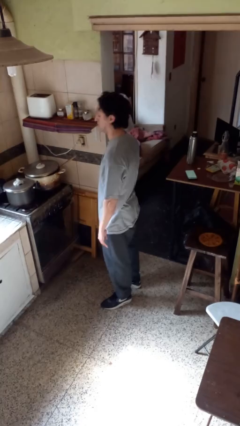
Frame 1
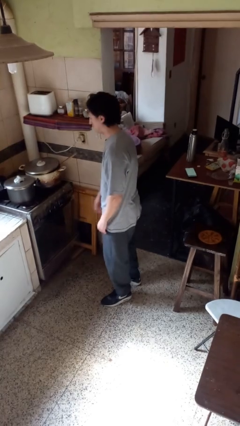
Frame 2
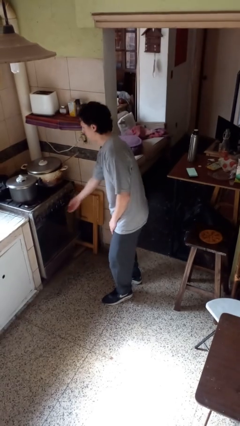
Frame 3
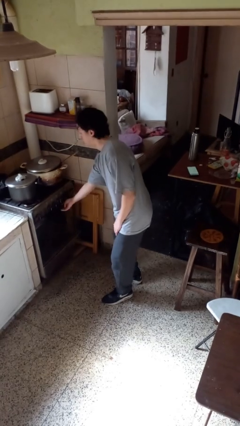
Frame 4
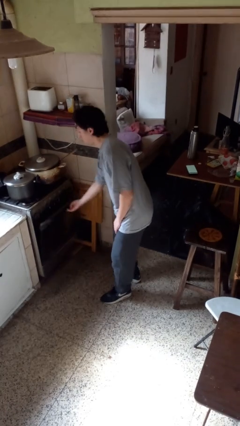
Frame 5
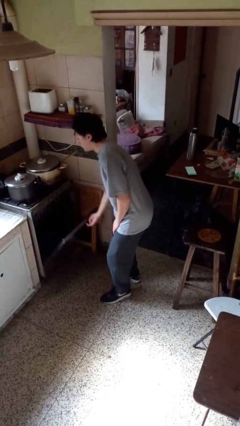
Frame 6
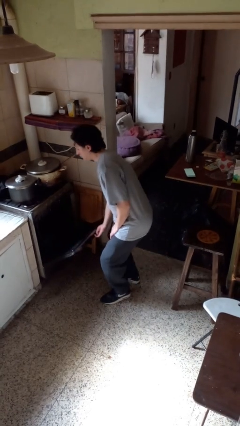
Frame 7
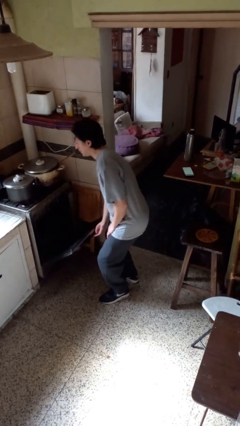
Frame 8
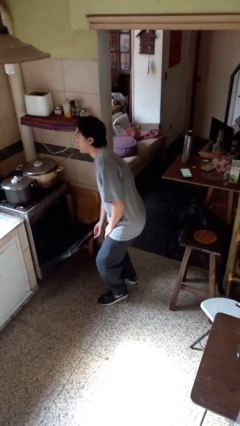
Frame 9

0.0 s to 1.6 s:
person opens oven door

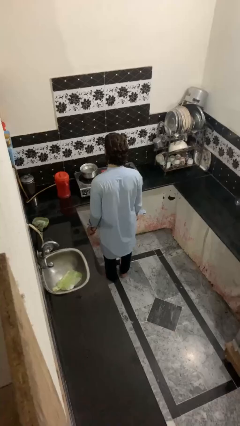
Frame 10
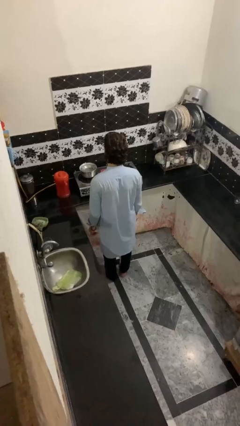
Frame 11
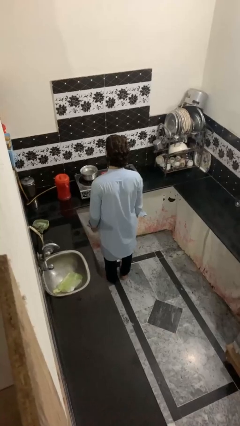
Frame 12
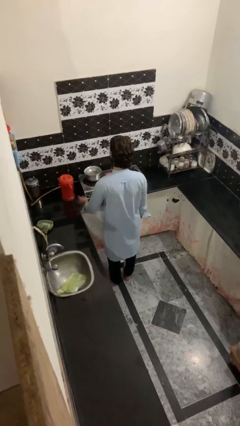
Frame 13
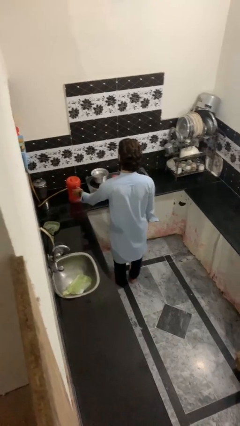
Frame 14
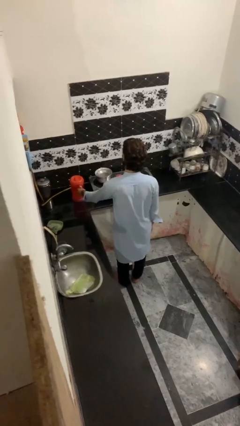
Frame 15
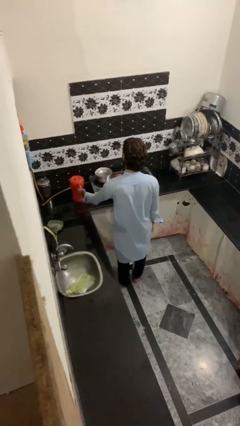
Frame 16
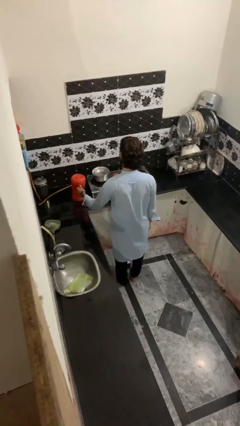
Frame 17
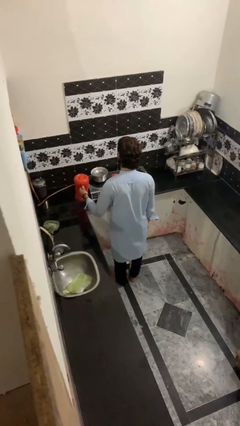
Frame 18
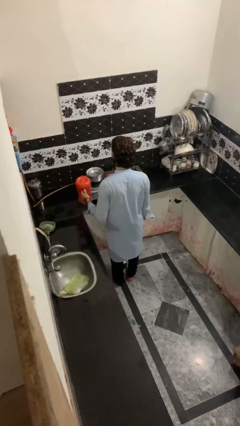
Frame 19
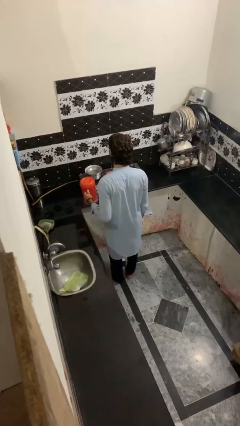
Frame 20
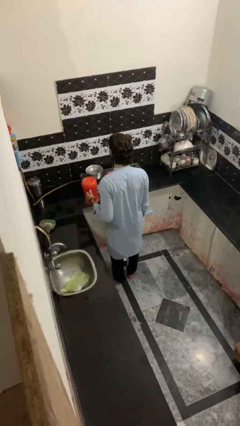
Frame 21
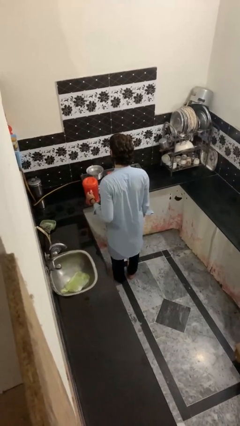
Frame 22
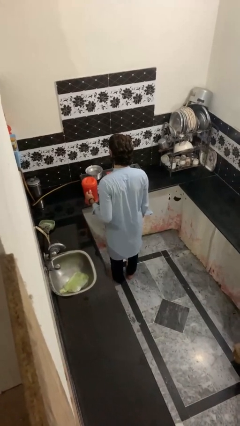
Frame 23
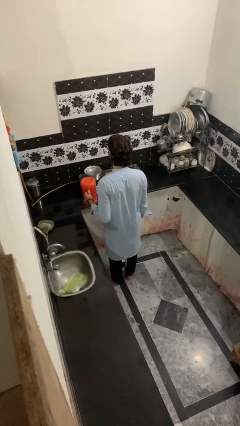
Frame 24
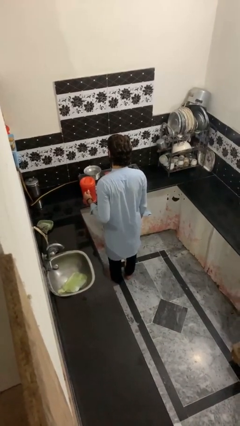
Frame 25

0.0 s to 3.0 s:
person picks up object from countertop

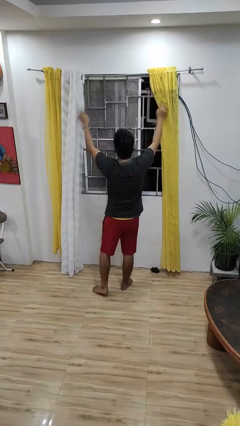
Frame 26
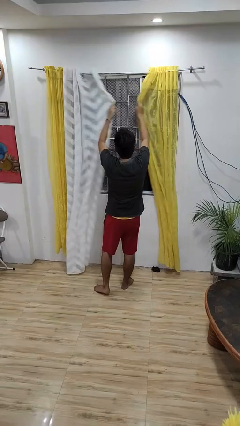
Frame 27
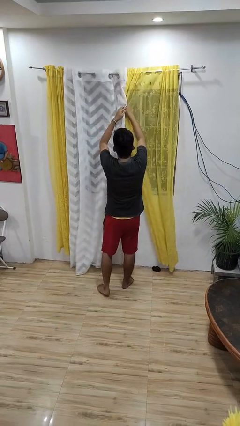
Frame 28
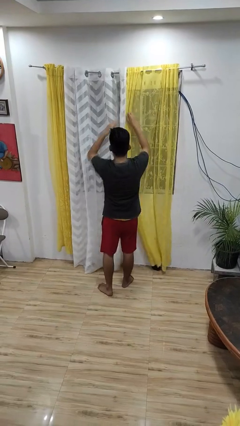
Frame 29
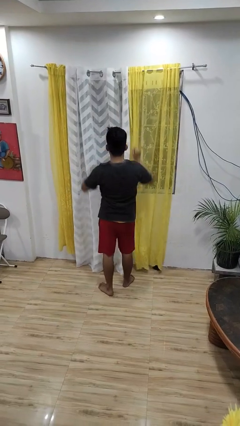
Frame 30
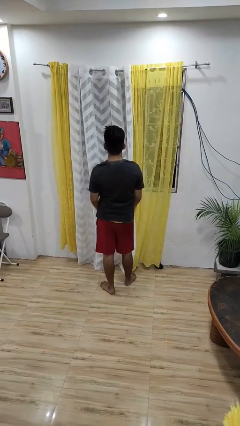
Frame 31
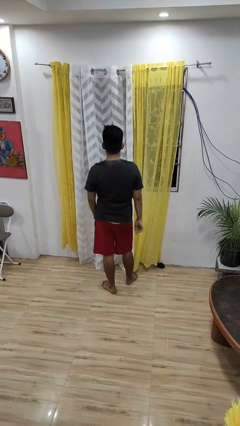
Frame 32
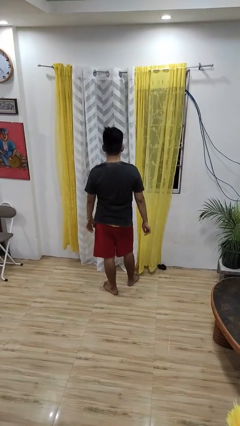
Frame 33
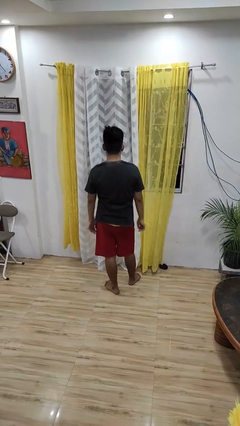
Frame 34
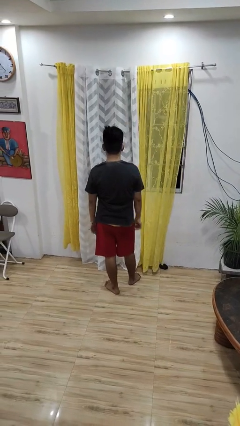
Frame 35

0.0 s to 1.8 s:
person closes curtains

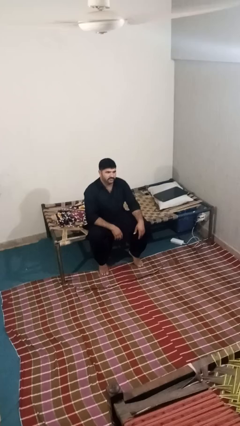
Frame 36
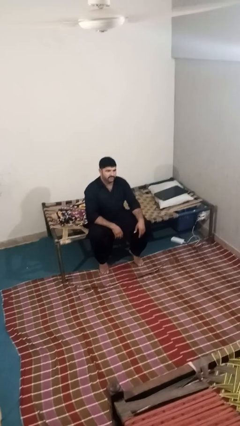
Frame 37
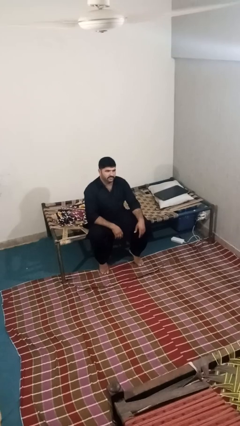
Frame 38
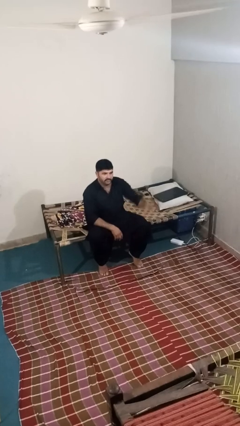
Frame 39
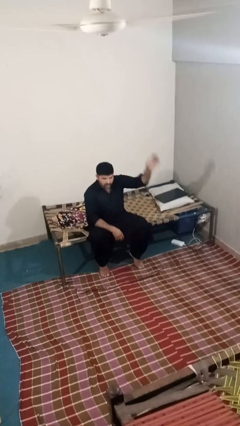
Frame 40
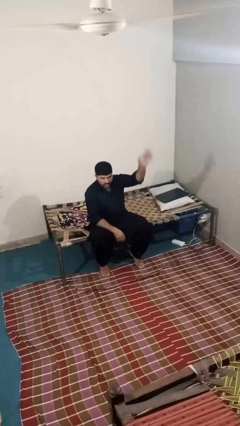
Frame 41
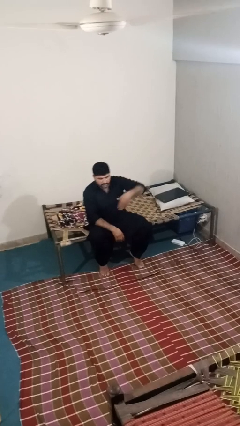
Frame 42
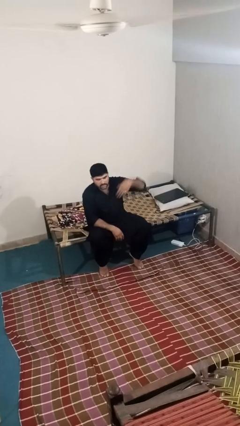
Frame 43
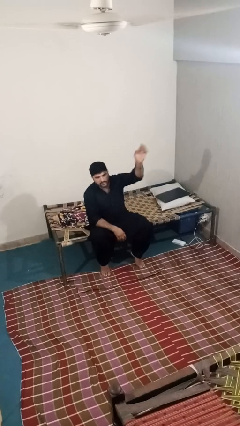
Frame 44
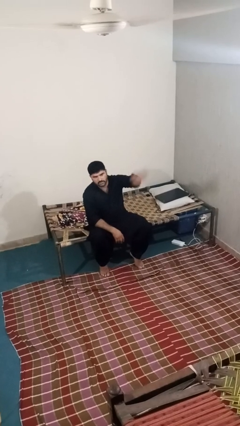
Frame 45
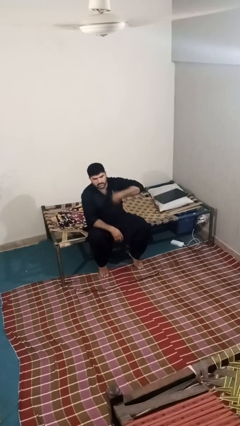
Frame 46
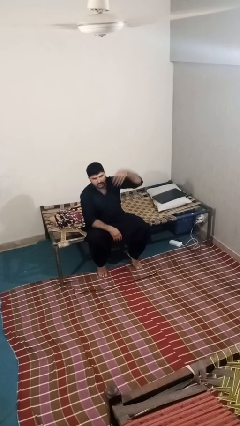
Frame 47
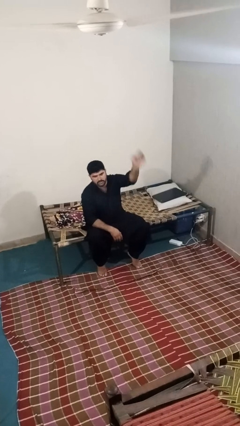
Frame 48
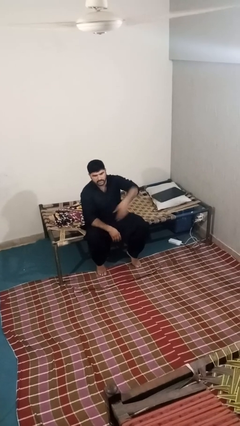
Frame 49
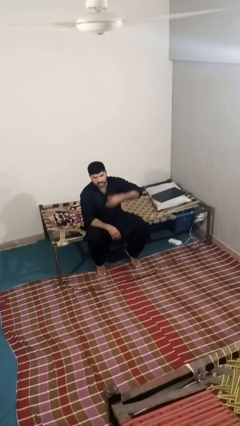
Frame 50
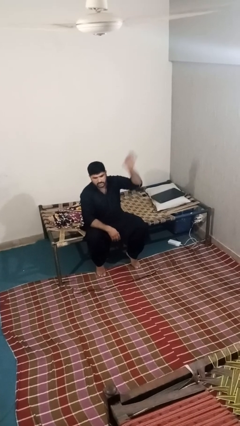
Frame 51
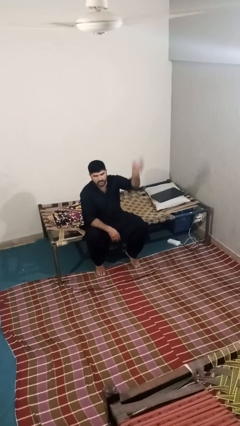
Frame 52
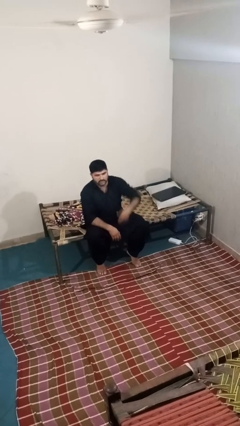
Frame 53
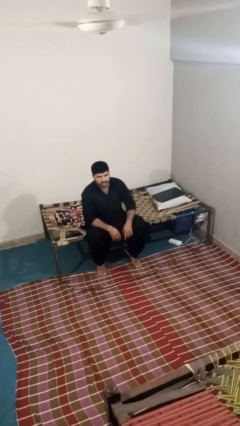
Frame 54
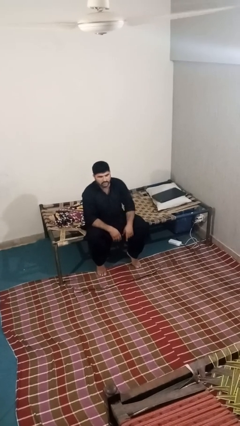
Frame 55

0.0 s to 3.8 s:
person gestures come here

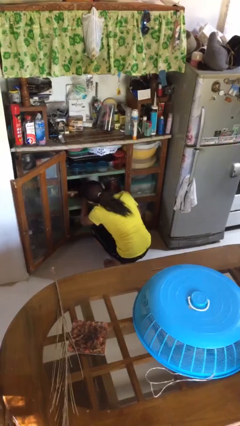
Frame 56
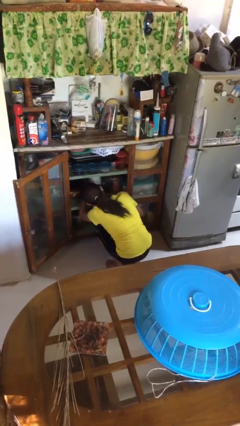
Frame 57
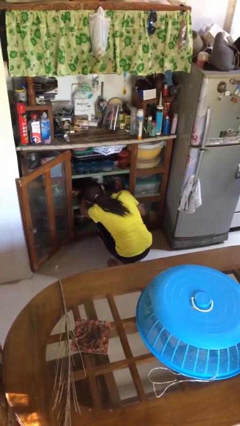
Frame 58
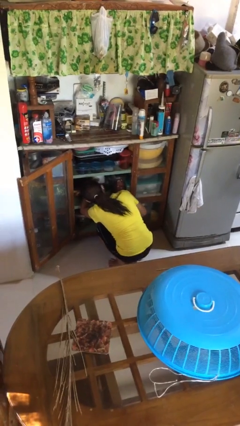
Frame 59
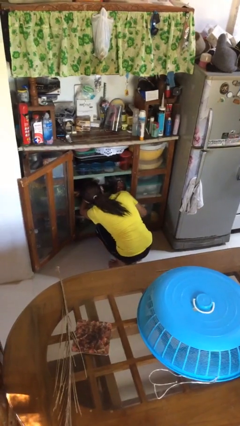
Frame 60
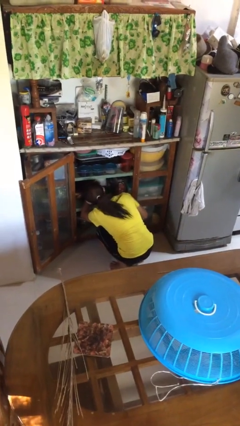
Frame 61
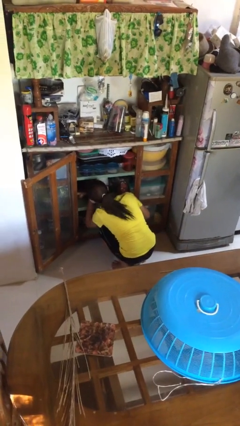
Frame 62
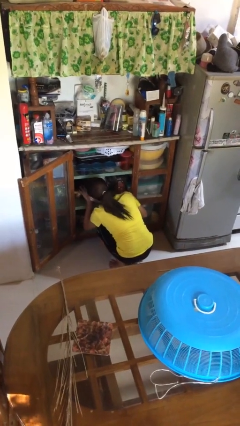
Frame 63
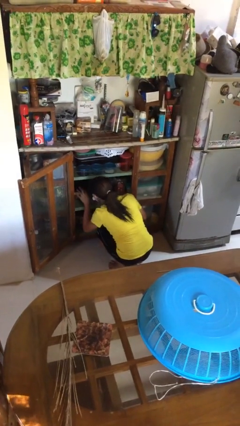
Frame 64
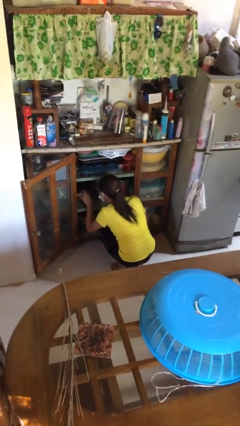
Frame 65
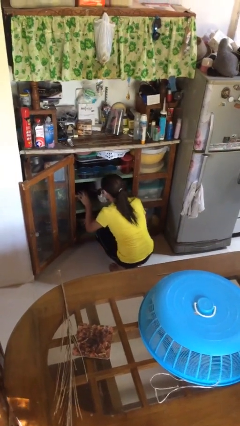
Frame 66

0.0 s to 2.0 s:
person searches in cabinet

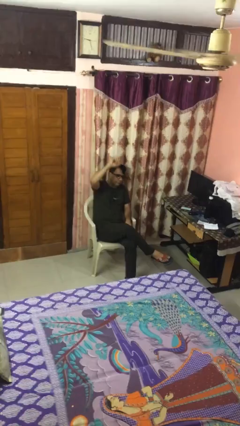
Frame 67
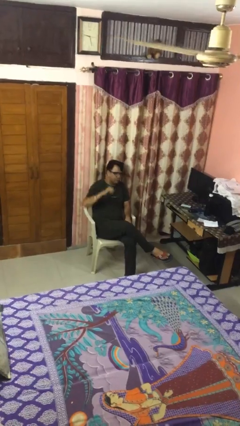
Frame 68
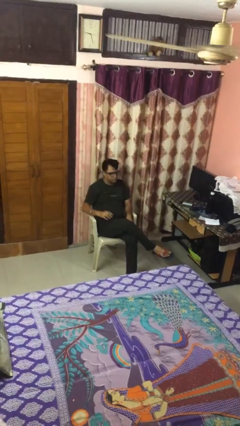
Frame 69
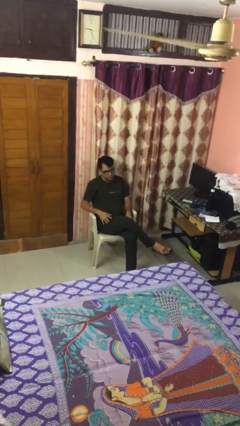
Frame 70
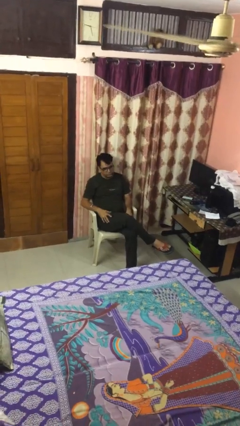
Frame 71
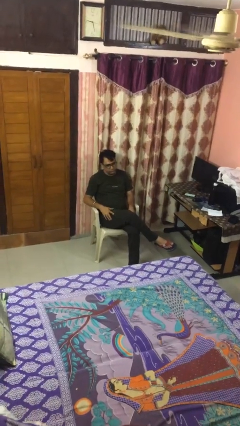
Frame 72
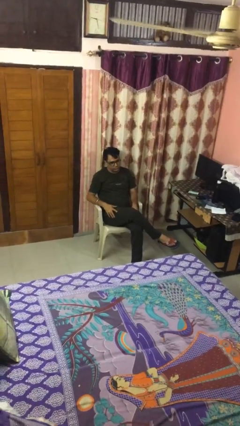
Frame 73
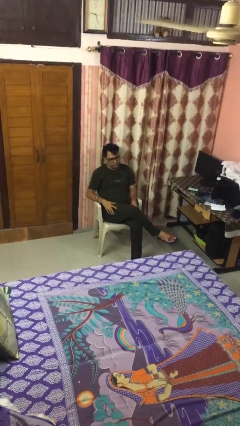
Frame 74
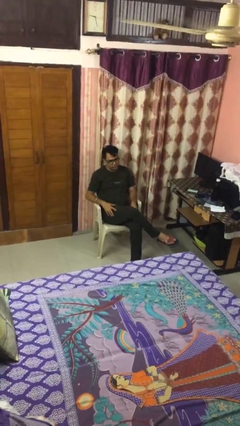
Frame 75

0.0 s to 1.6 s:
person gestures lower hand

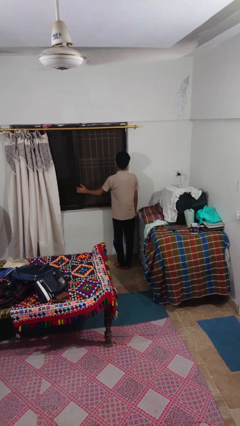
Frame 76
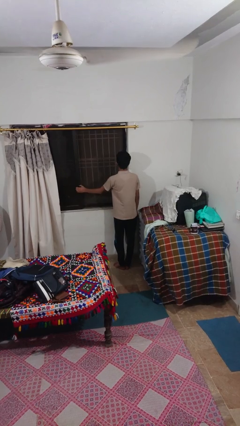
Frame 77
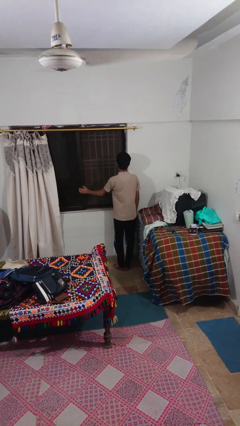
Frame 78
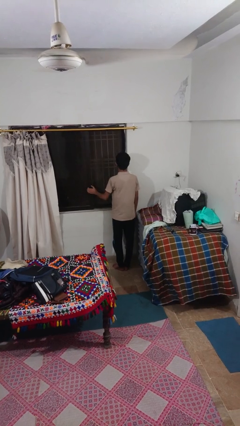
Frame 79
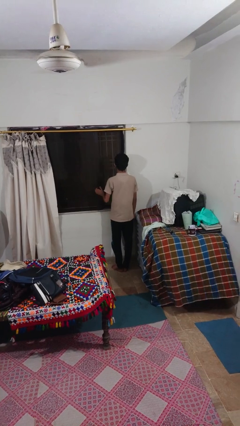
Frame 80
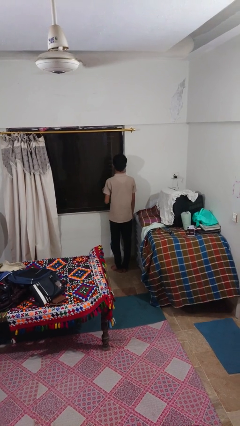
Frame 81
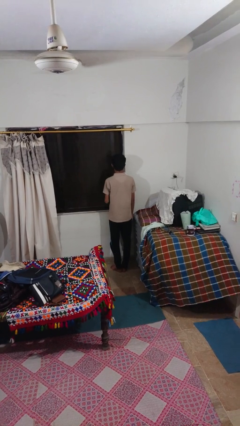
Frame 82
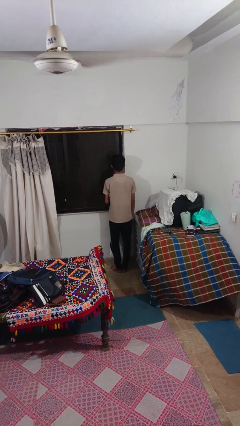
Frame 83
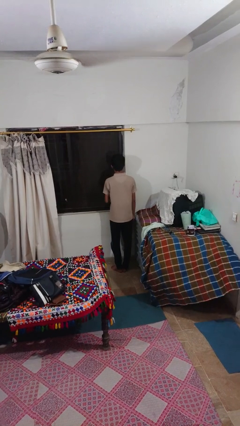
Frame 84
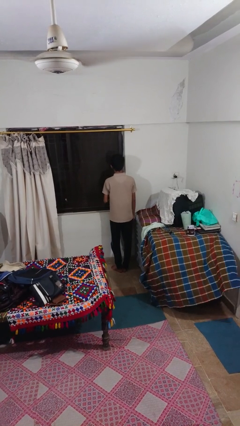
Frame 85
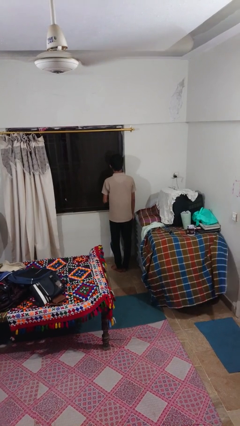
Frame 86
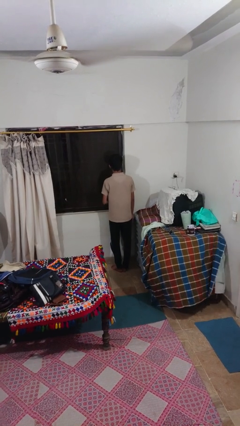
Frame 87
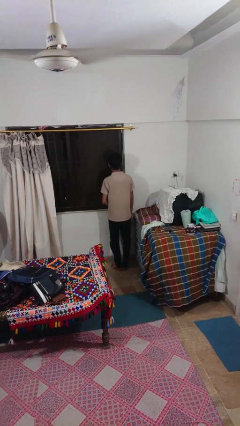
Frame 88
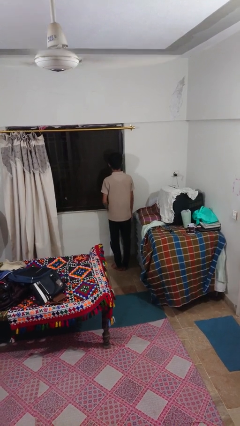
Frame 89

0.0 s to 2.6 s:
person closes sliding door

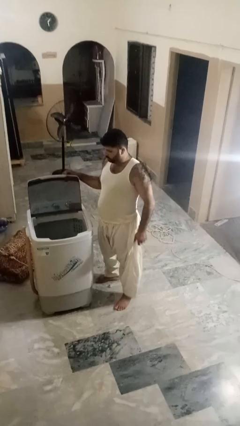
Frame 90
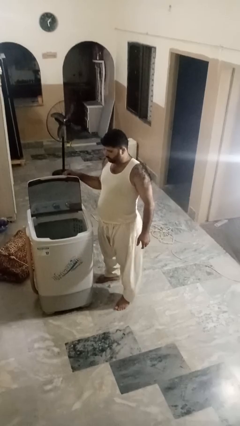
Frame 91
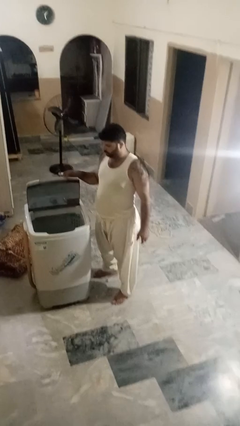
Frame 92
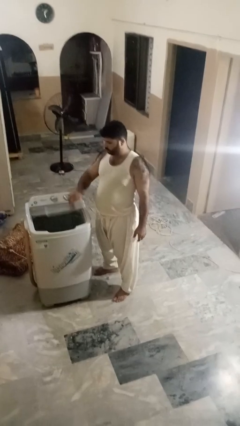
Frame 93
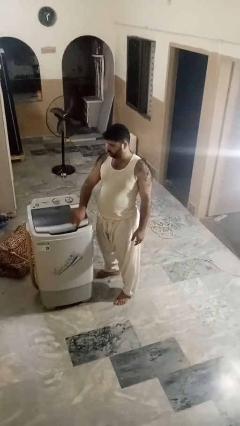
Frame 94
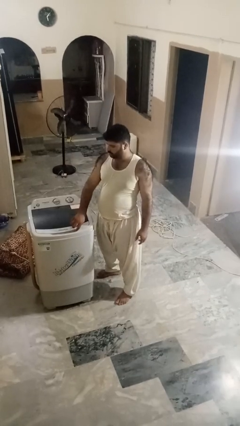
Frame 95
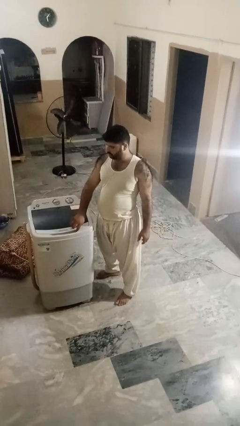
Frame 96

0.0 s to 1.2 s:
person closes clothes washer
